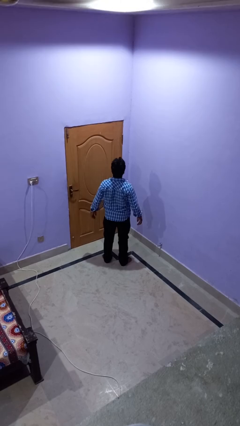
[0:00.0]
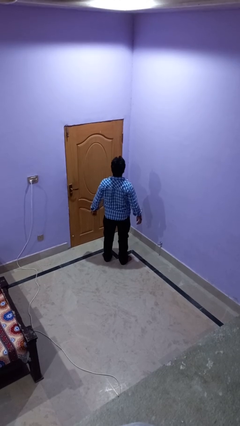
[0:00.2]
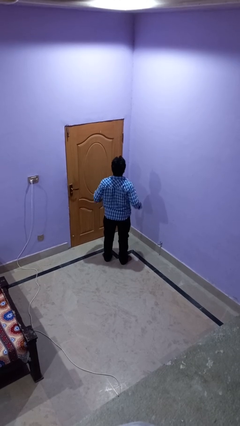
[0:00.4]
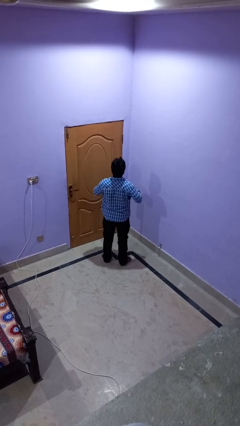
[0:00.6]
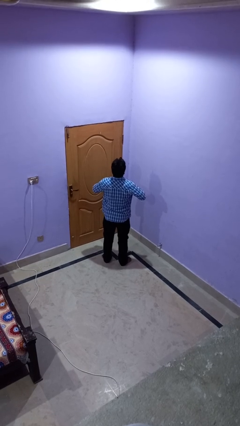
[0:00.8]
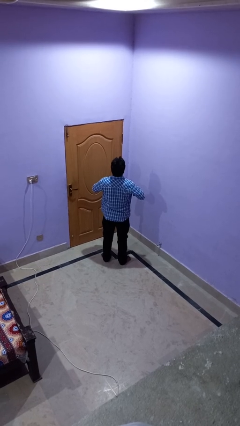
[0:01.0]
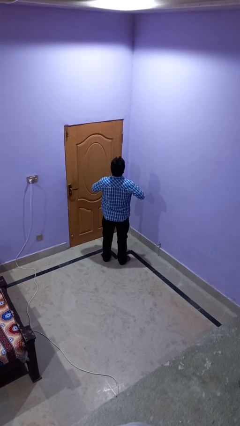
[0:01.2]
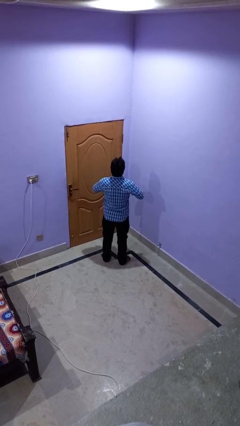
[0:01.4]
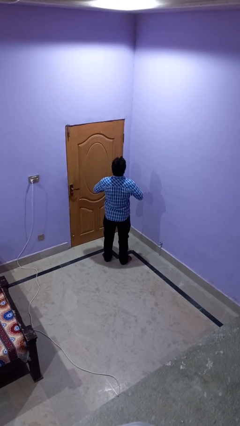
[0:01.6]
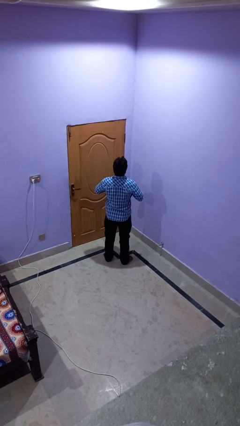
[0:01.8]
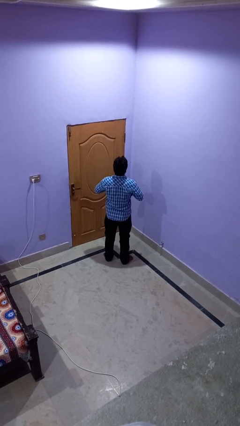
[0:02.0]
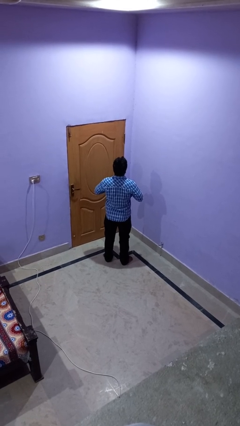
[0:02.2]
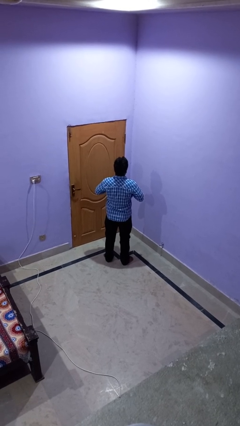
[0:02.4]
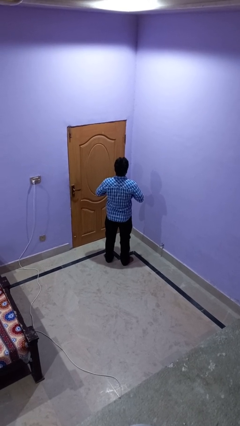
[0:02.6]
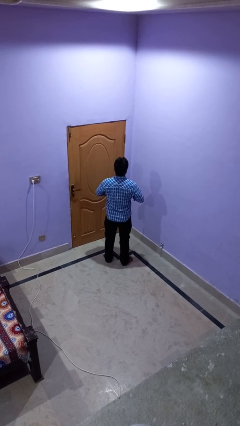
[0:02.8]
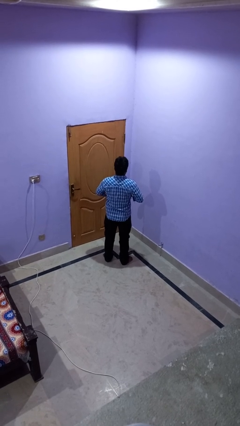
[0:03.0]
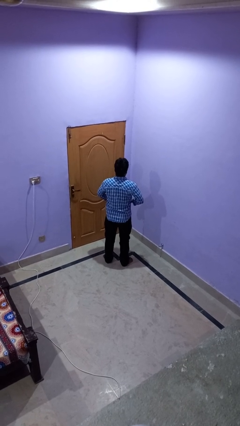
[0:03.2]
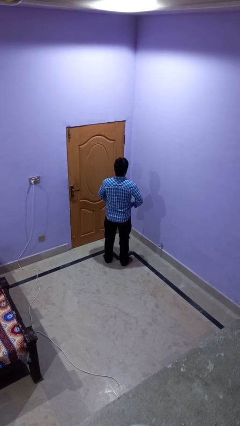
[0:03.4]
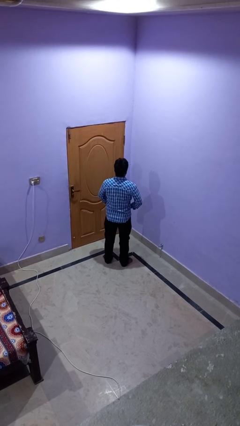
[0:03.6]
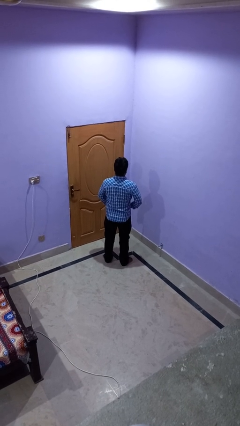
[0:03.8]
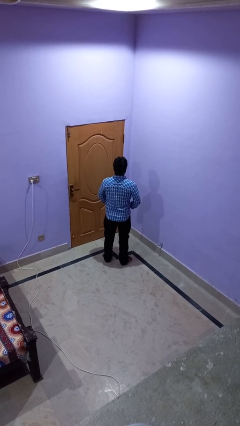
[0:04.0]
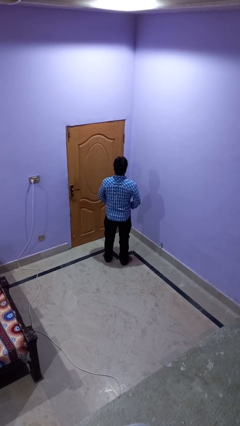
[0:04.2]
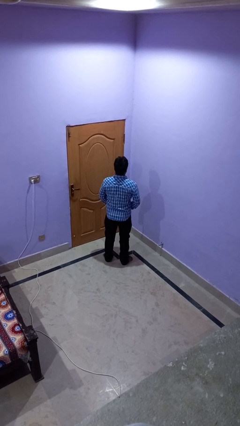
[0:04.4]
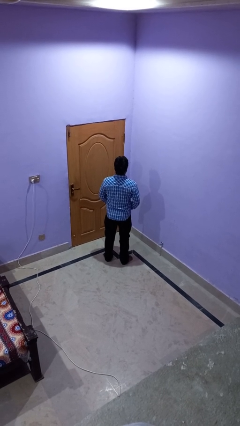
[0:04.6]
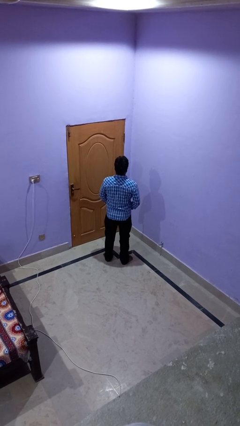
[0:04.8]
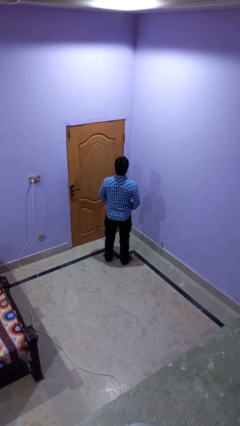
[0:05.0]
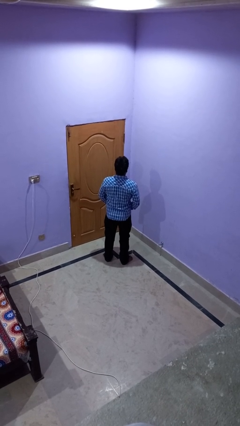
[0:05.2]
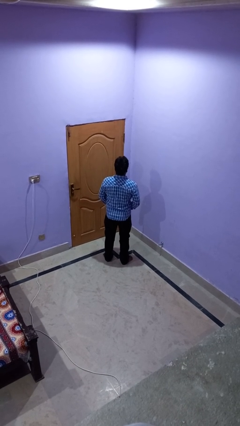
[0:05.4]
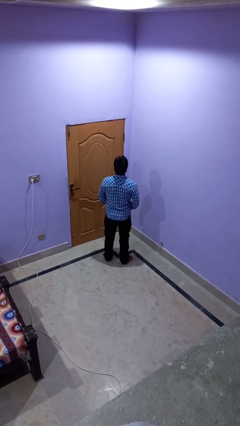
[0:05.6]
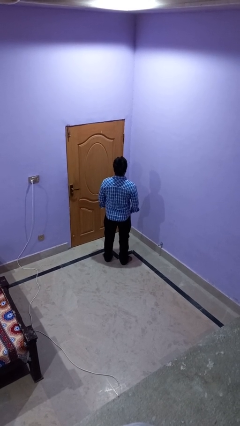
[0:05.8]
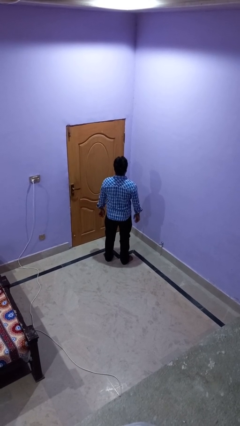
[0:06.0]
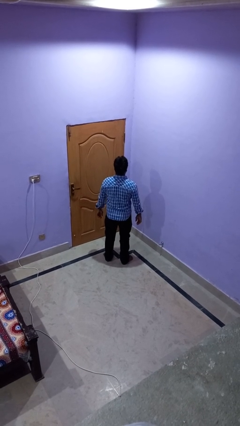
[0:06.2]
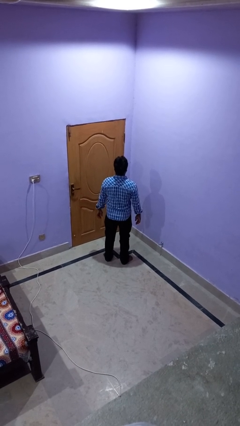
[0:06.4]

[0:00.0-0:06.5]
person buttons shirt

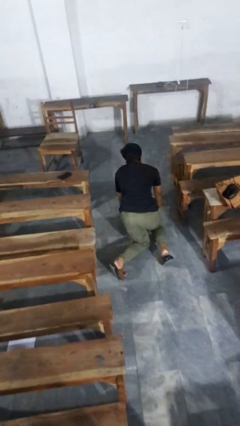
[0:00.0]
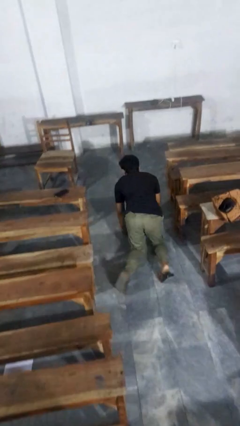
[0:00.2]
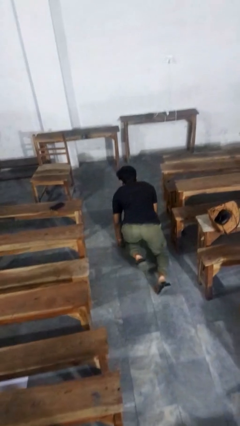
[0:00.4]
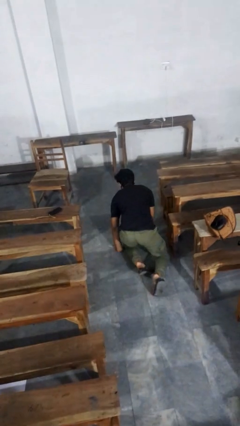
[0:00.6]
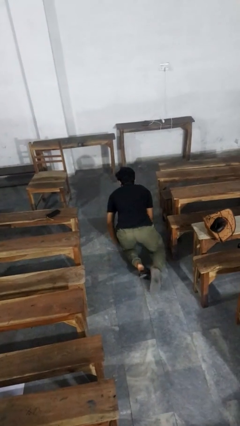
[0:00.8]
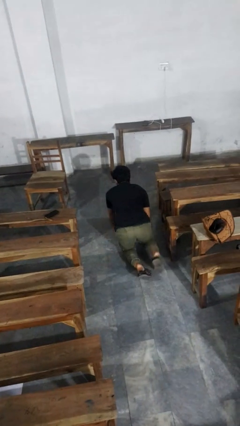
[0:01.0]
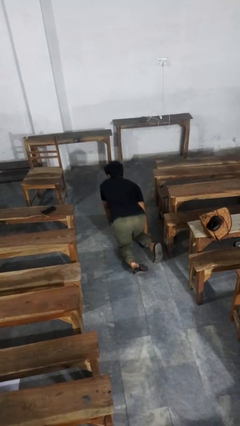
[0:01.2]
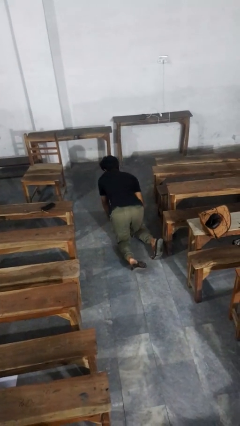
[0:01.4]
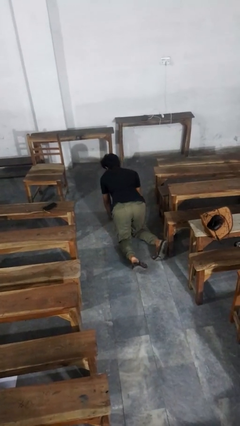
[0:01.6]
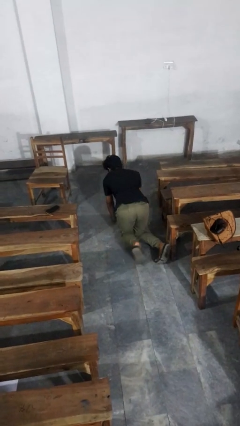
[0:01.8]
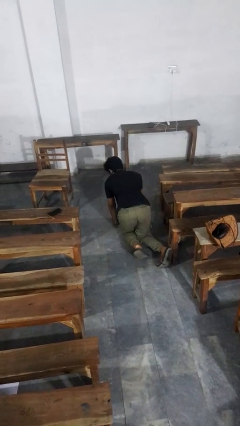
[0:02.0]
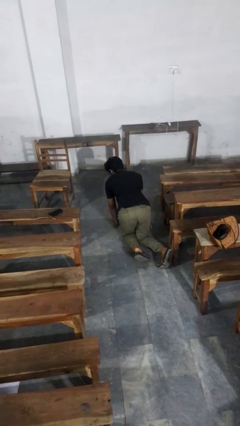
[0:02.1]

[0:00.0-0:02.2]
person crawls

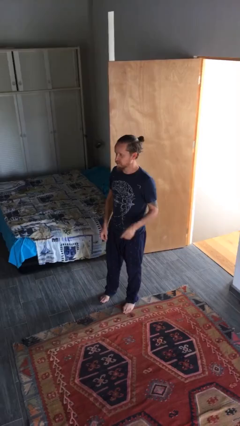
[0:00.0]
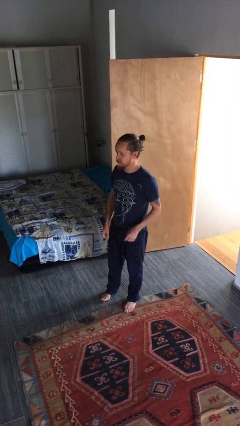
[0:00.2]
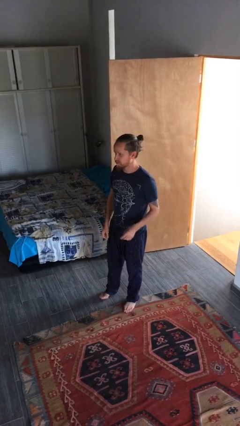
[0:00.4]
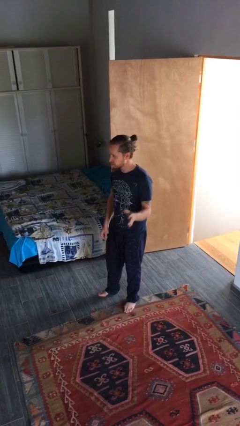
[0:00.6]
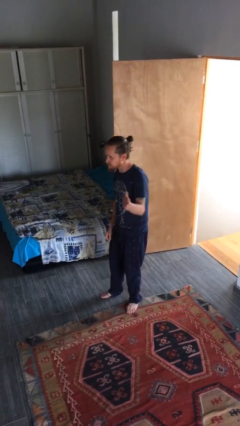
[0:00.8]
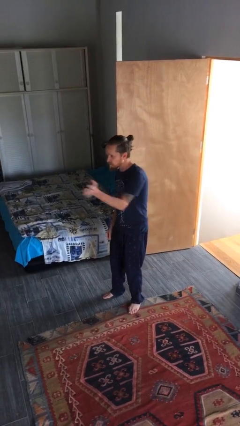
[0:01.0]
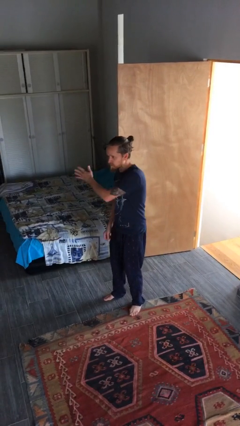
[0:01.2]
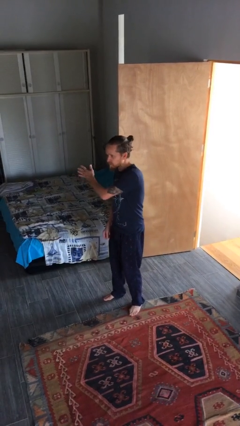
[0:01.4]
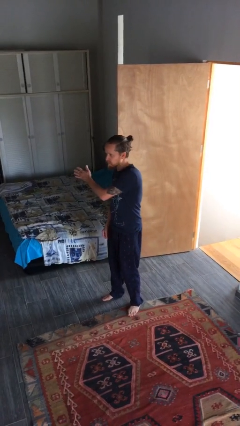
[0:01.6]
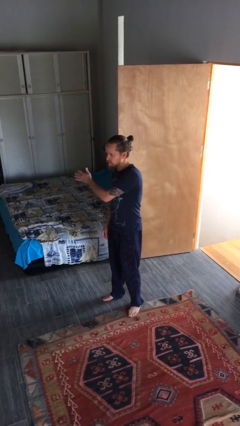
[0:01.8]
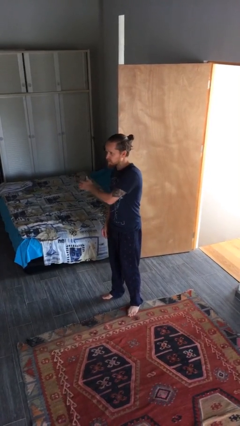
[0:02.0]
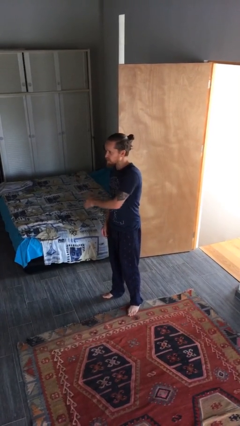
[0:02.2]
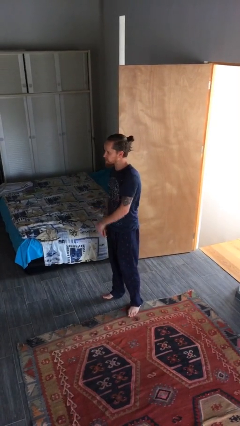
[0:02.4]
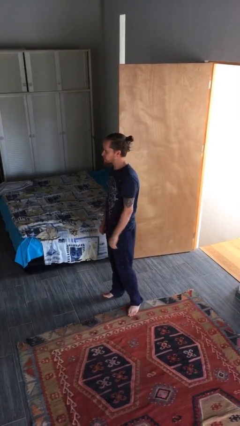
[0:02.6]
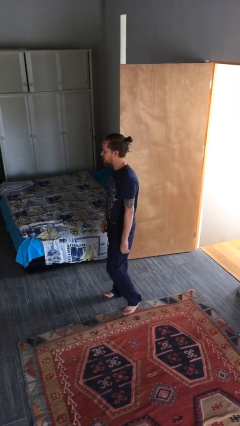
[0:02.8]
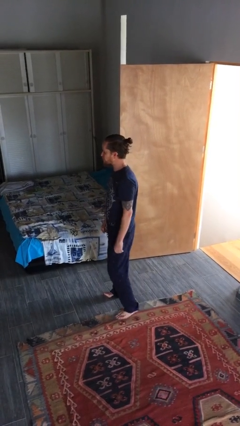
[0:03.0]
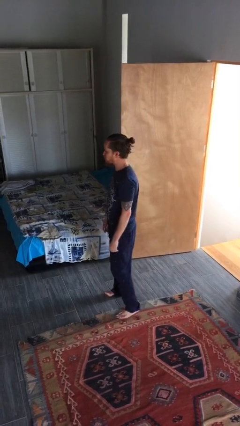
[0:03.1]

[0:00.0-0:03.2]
person gestures swipe right

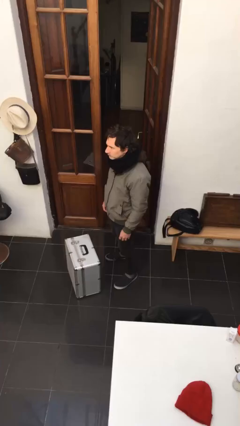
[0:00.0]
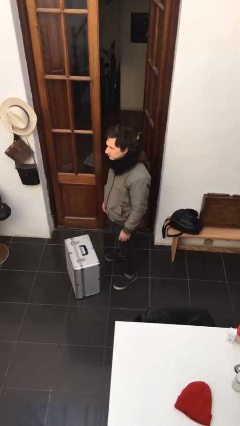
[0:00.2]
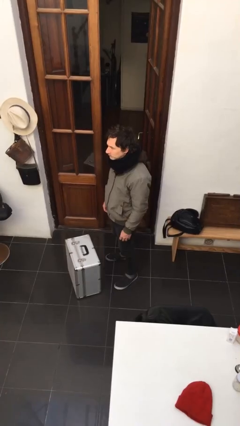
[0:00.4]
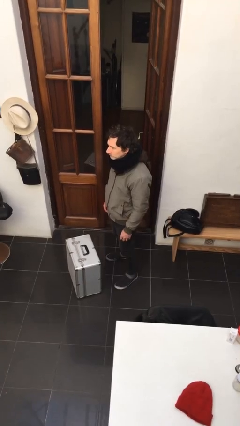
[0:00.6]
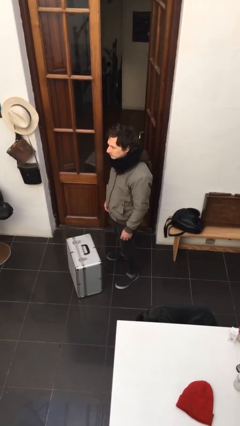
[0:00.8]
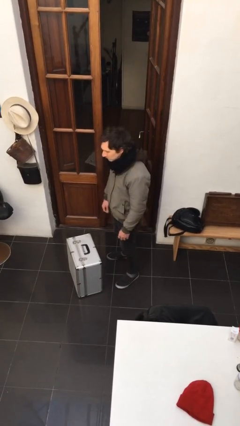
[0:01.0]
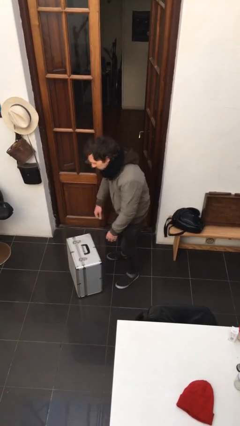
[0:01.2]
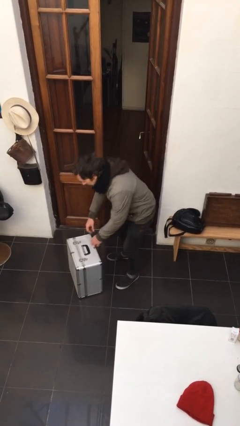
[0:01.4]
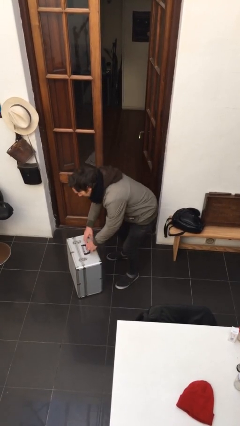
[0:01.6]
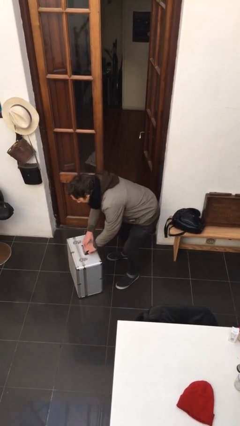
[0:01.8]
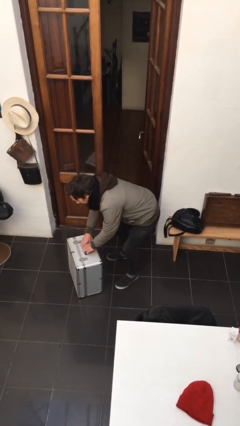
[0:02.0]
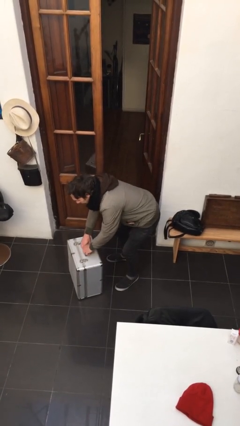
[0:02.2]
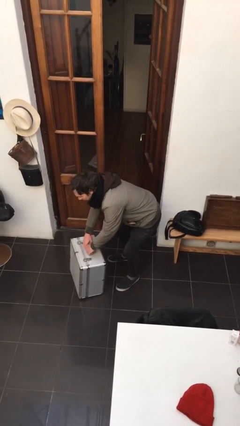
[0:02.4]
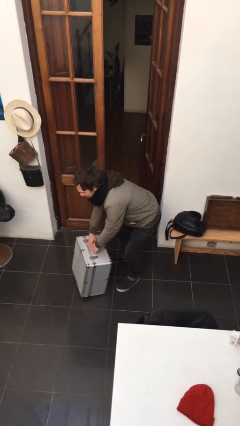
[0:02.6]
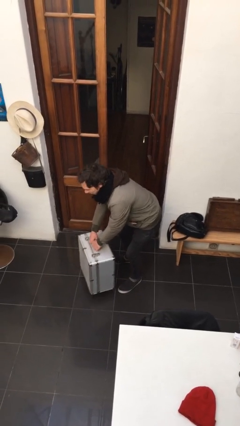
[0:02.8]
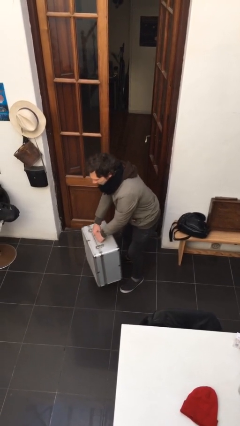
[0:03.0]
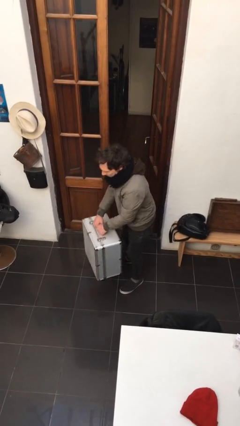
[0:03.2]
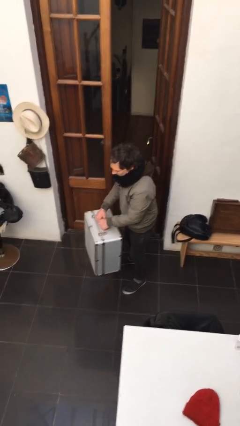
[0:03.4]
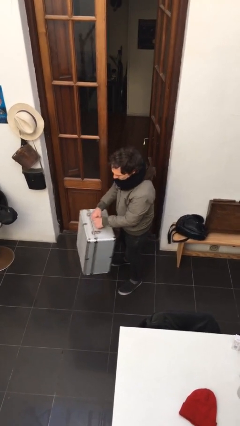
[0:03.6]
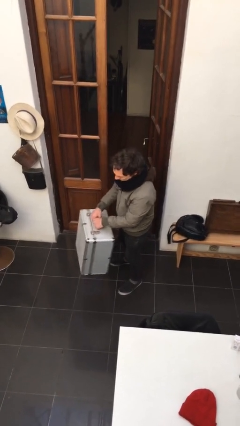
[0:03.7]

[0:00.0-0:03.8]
person picks up object from floor

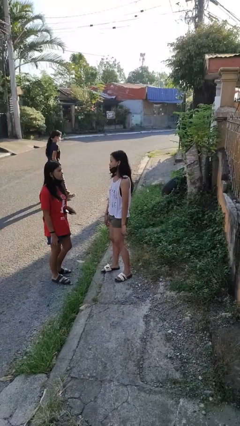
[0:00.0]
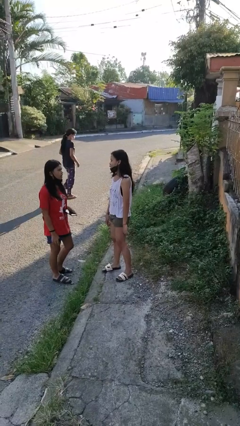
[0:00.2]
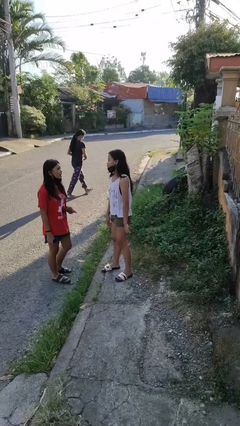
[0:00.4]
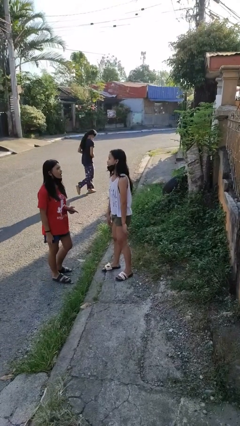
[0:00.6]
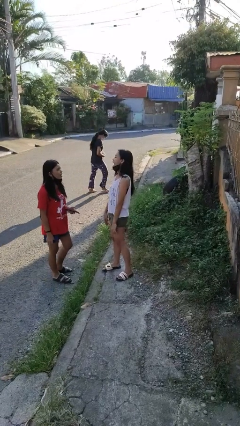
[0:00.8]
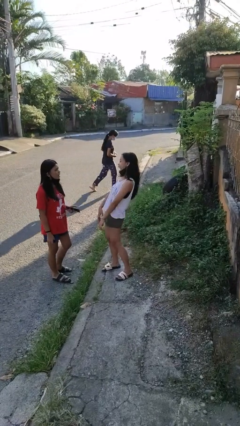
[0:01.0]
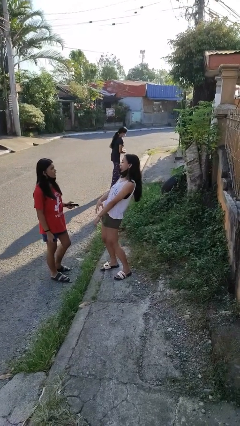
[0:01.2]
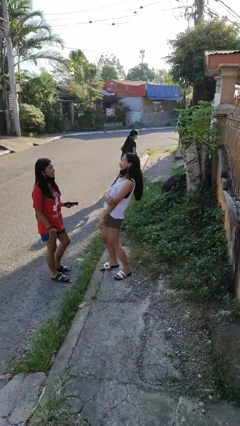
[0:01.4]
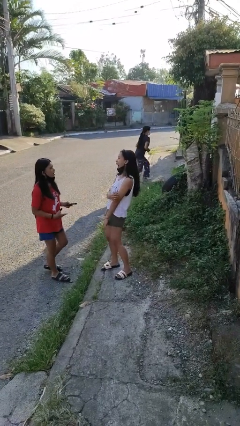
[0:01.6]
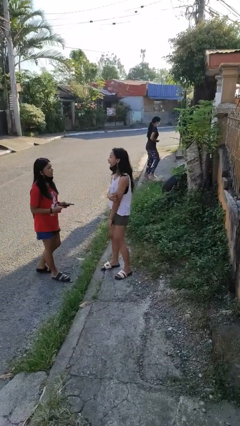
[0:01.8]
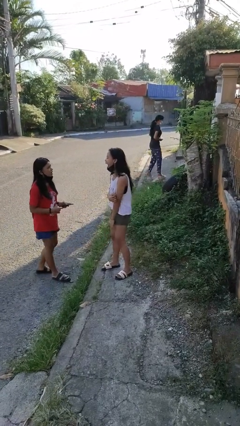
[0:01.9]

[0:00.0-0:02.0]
person laughs with person

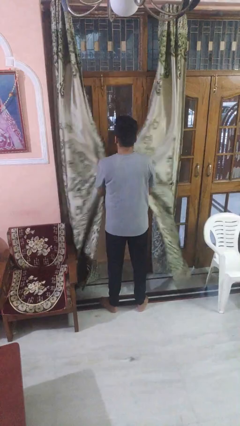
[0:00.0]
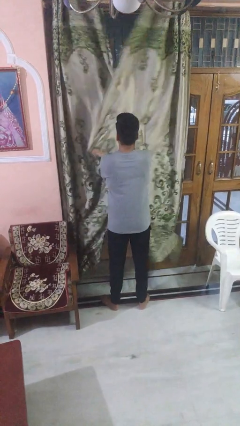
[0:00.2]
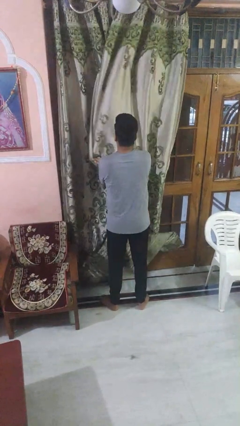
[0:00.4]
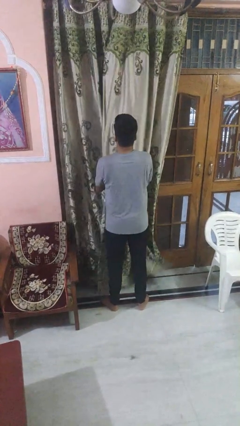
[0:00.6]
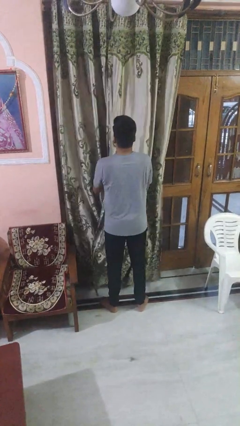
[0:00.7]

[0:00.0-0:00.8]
person closes curtains
